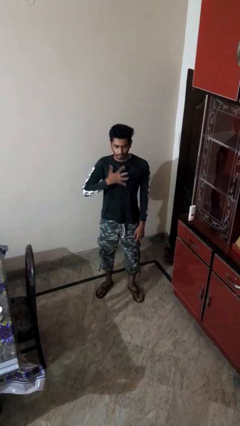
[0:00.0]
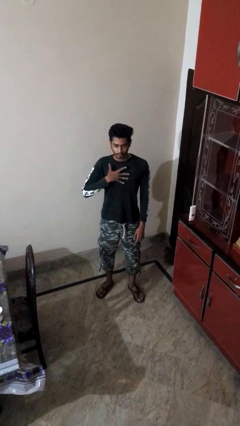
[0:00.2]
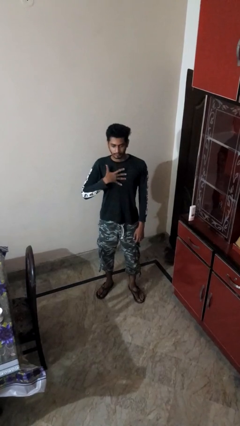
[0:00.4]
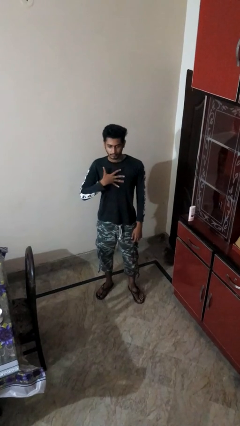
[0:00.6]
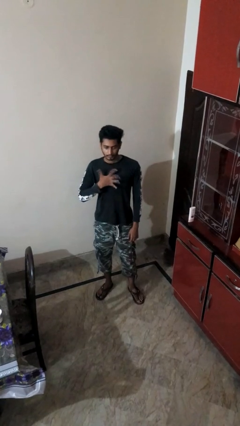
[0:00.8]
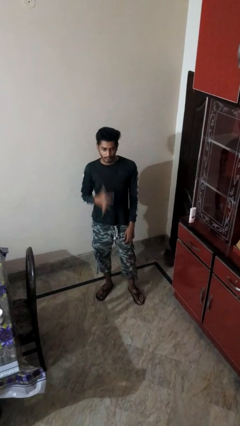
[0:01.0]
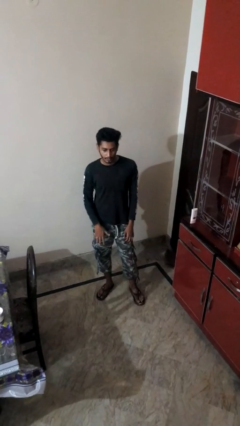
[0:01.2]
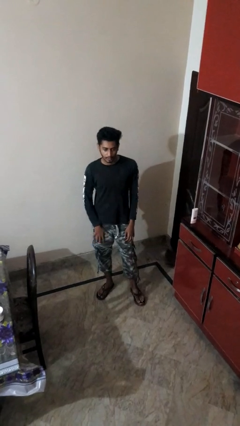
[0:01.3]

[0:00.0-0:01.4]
person drums on chest

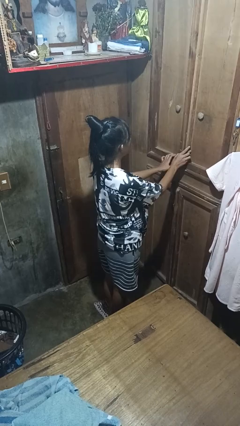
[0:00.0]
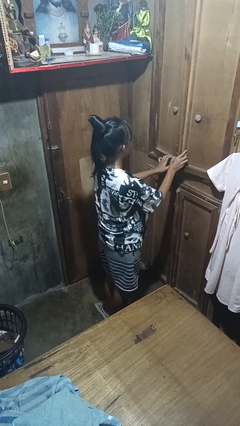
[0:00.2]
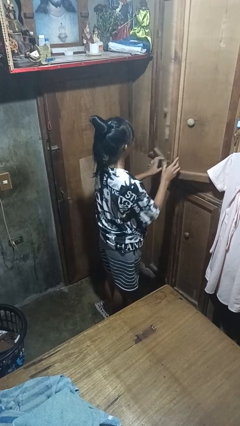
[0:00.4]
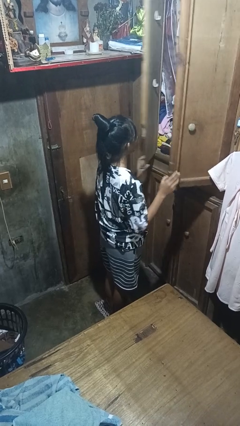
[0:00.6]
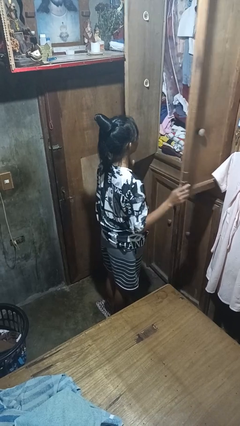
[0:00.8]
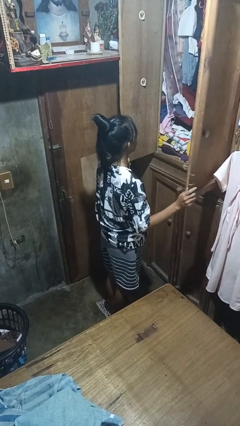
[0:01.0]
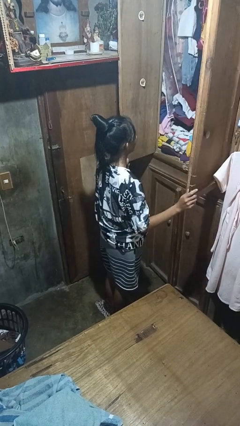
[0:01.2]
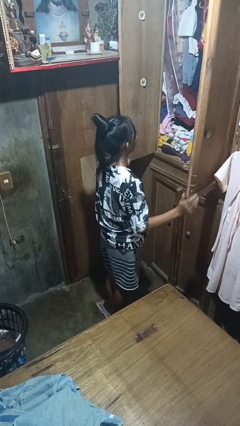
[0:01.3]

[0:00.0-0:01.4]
person opens closet door

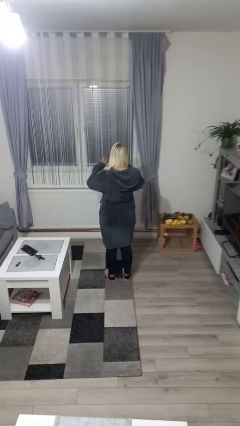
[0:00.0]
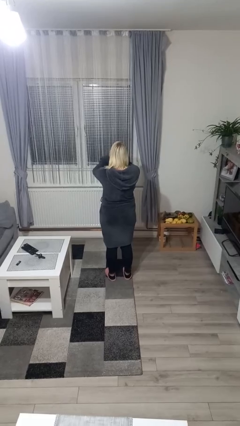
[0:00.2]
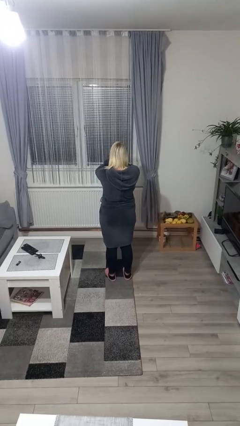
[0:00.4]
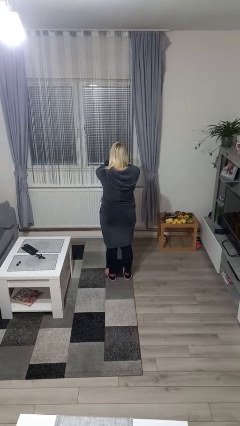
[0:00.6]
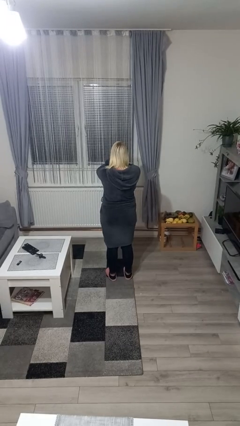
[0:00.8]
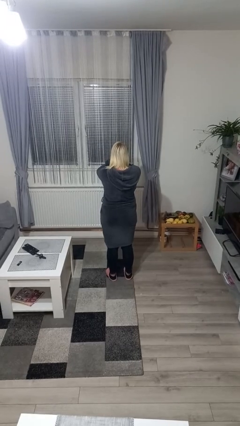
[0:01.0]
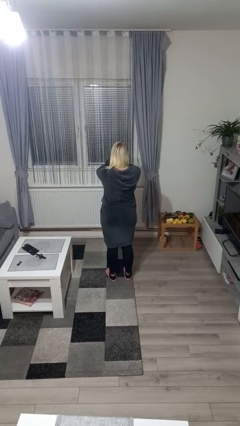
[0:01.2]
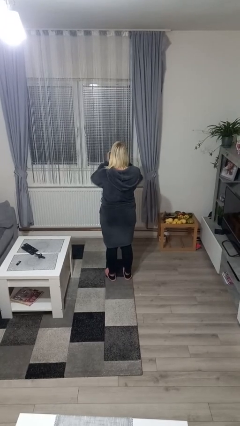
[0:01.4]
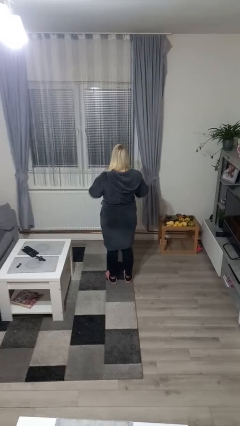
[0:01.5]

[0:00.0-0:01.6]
person covers face with hands

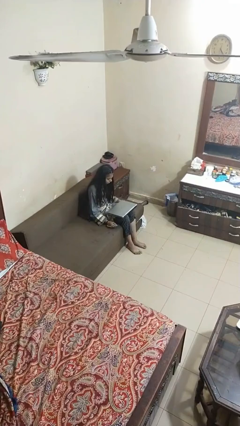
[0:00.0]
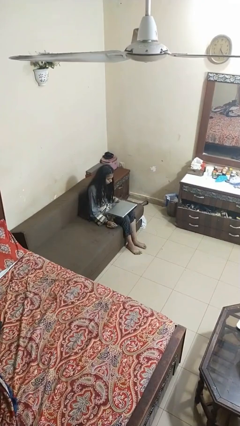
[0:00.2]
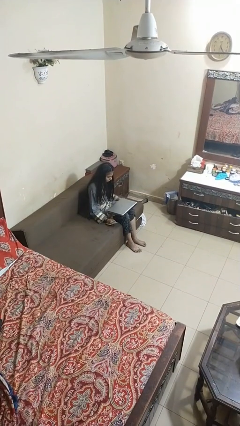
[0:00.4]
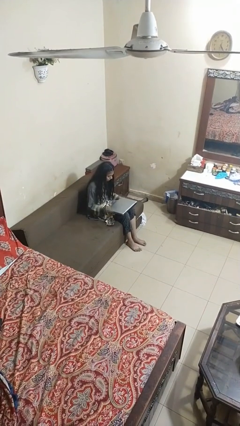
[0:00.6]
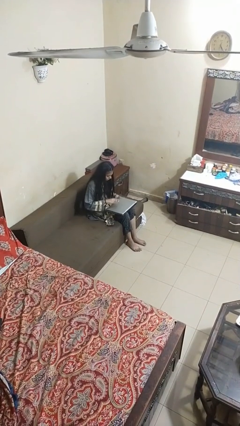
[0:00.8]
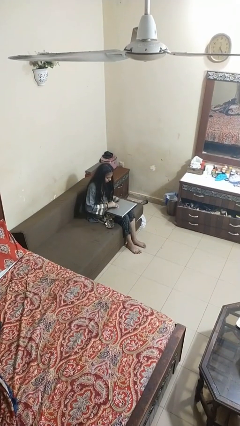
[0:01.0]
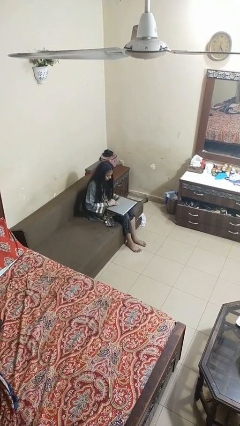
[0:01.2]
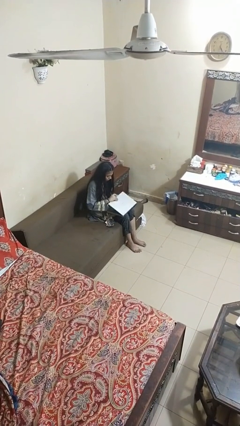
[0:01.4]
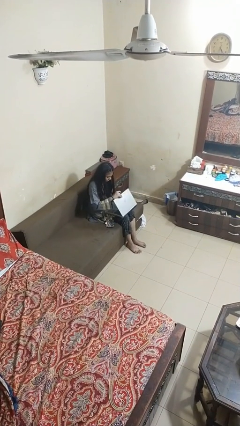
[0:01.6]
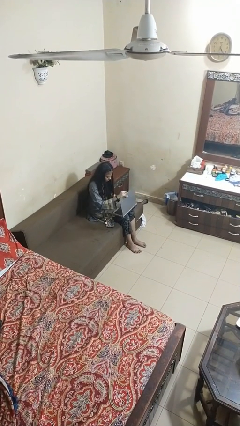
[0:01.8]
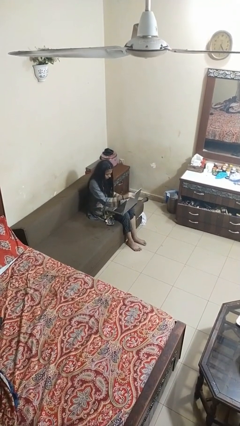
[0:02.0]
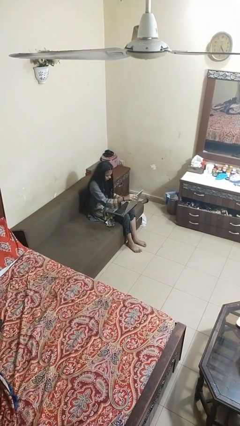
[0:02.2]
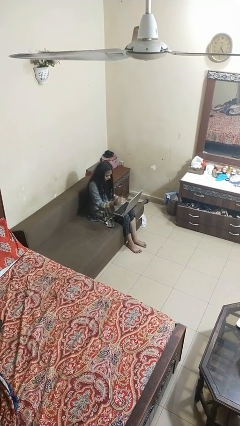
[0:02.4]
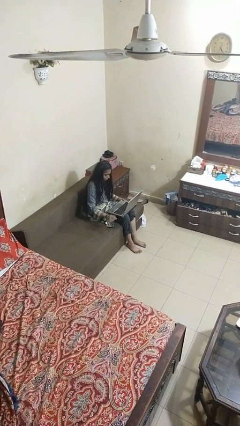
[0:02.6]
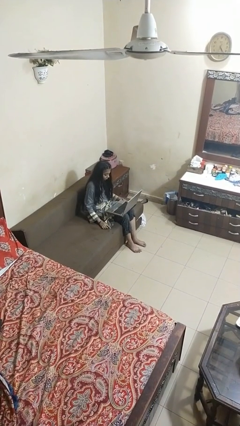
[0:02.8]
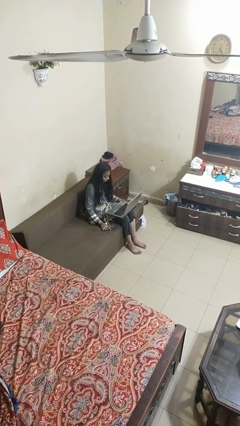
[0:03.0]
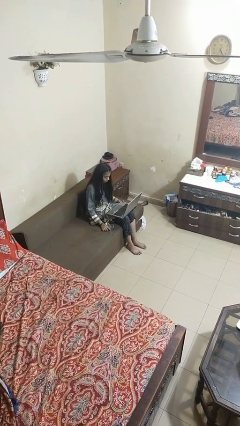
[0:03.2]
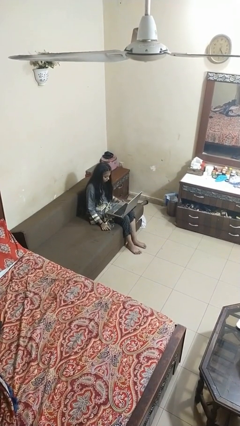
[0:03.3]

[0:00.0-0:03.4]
person opens laptop

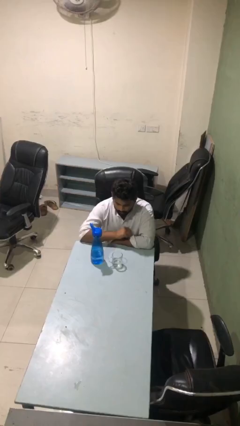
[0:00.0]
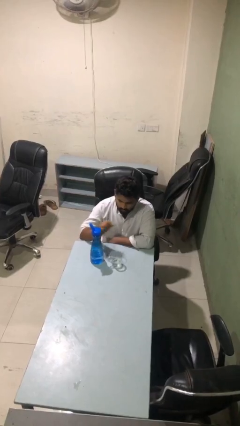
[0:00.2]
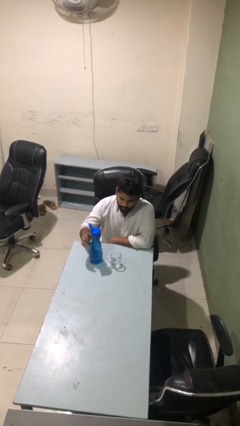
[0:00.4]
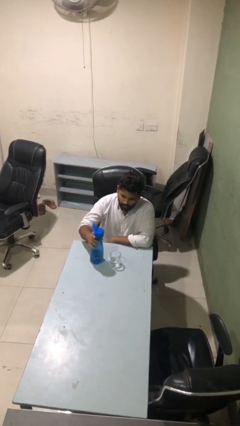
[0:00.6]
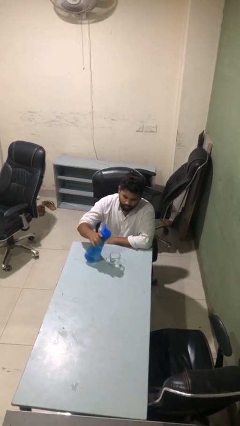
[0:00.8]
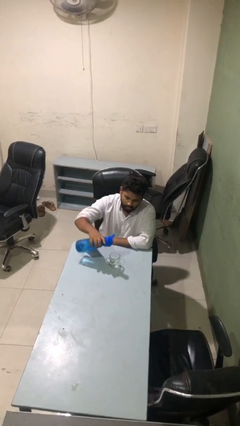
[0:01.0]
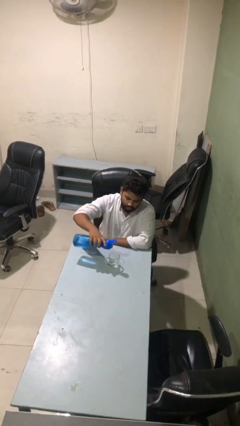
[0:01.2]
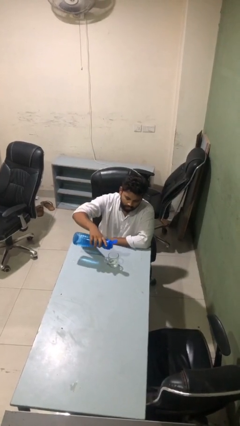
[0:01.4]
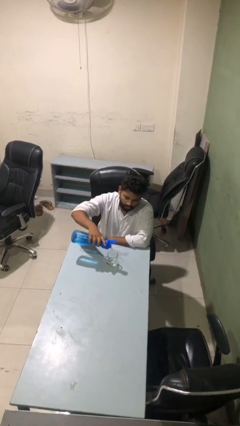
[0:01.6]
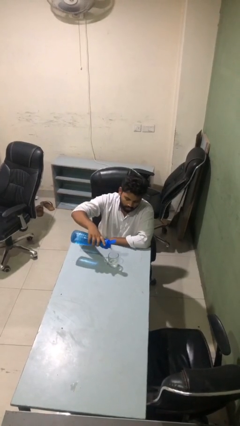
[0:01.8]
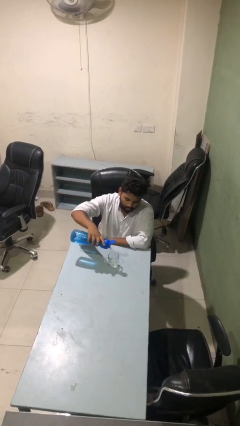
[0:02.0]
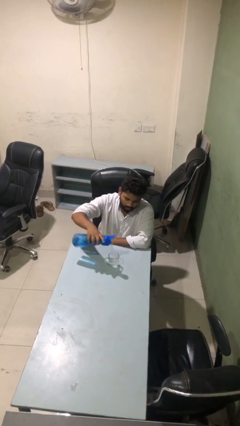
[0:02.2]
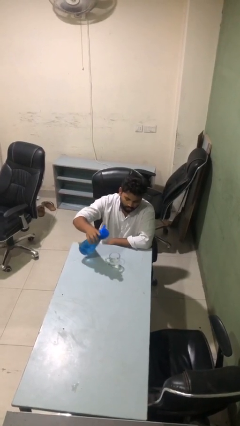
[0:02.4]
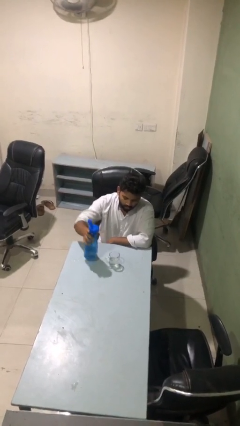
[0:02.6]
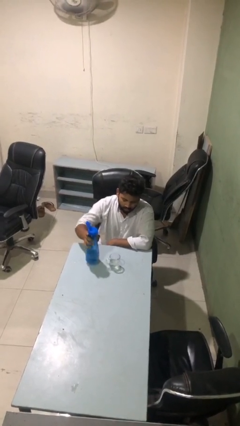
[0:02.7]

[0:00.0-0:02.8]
person pours liquid into cup

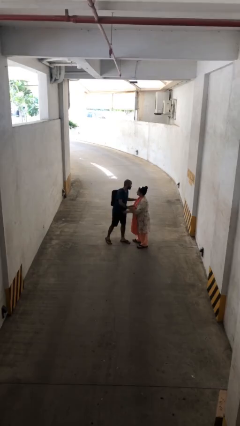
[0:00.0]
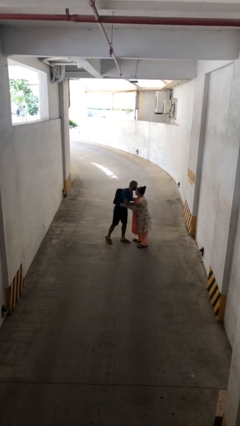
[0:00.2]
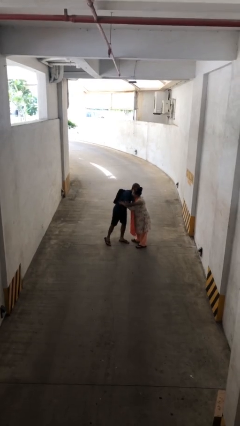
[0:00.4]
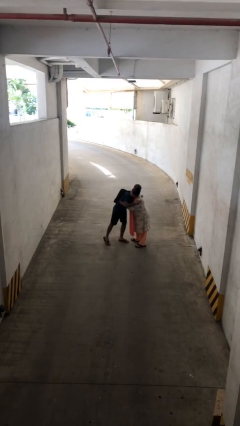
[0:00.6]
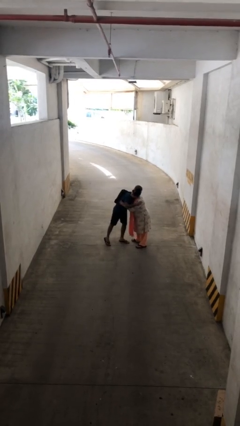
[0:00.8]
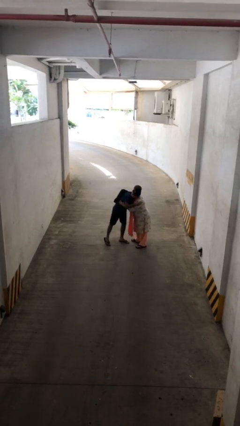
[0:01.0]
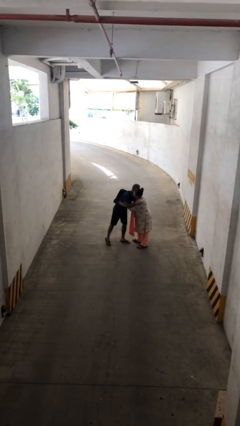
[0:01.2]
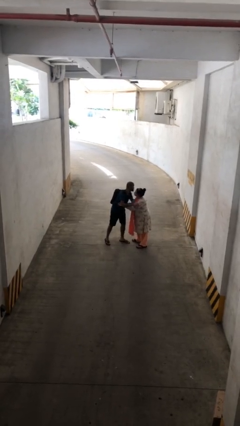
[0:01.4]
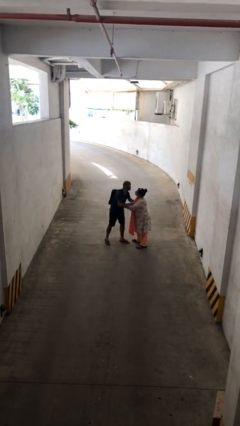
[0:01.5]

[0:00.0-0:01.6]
person embraces person

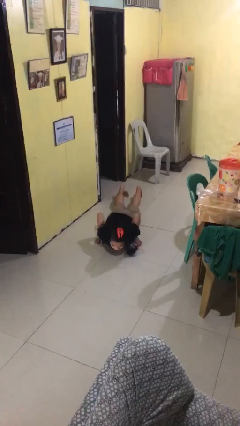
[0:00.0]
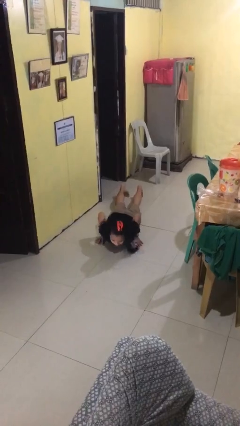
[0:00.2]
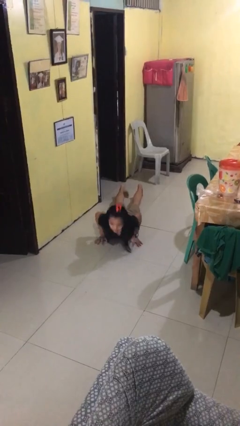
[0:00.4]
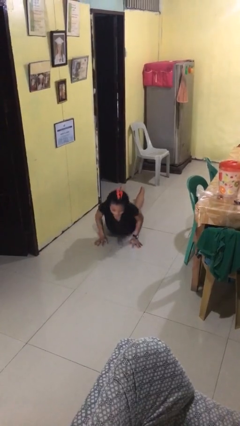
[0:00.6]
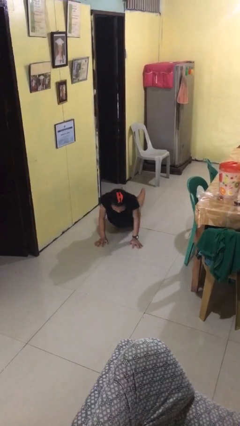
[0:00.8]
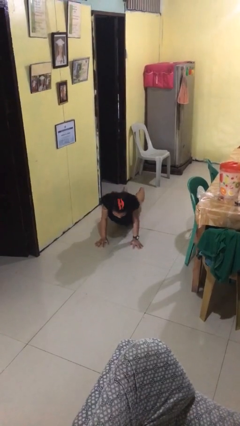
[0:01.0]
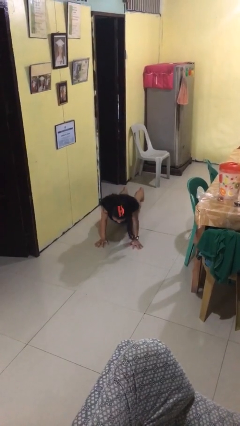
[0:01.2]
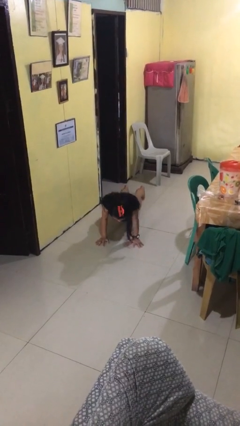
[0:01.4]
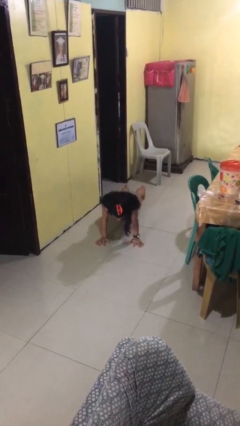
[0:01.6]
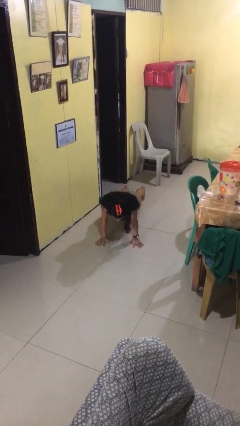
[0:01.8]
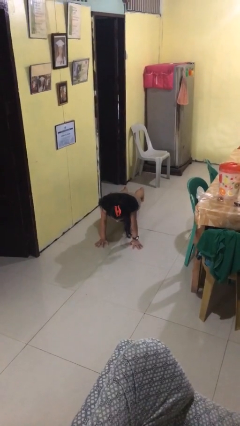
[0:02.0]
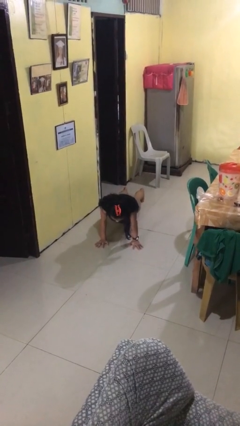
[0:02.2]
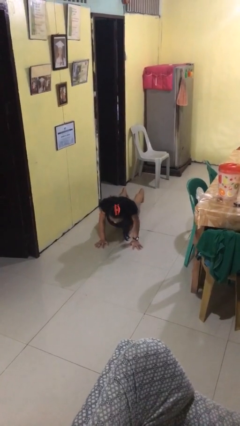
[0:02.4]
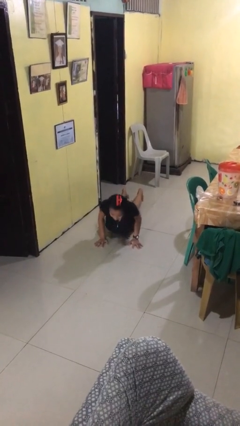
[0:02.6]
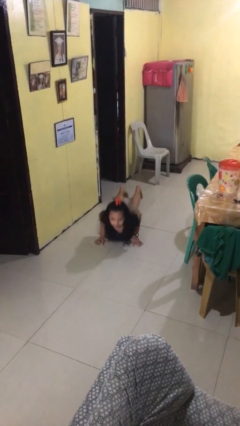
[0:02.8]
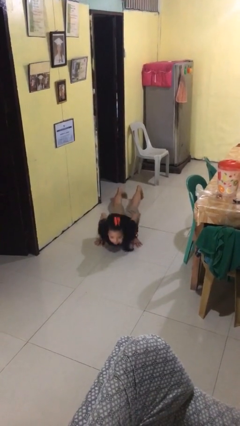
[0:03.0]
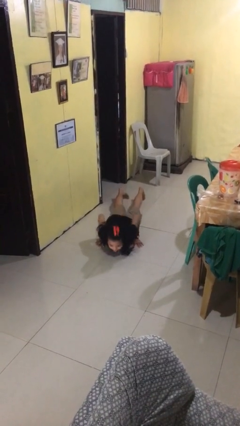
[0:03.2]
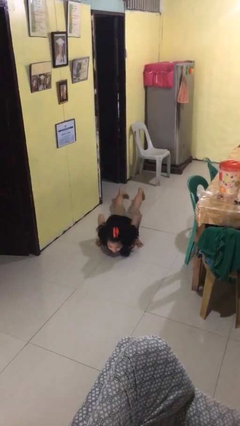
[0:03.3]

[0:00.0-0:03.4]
person exercises with pushup

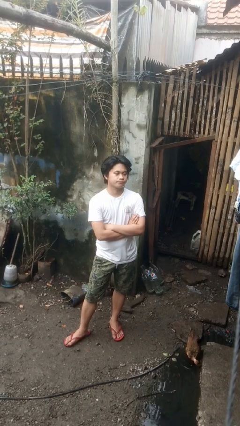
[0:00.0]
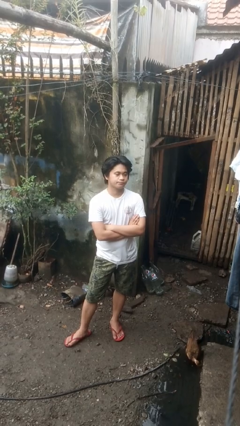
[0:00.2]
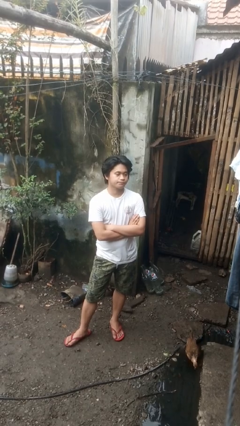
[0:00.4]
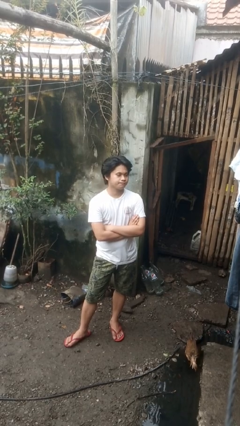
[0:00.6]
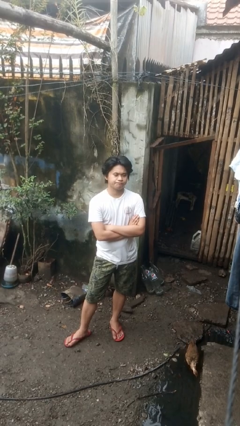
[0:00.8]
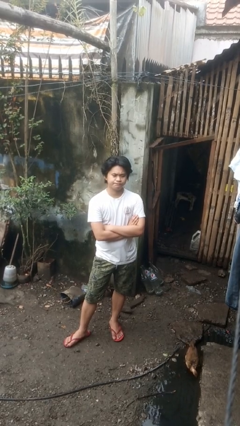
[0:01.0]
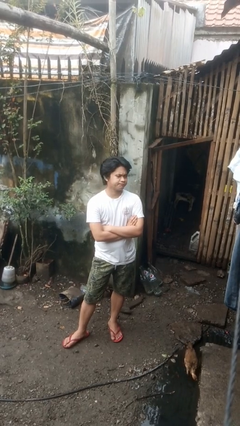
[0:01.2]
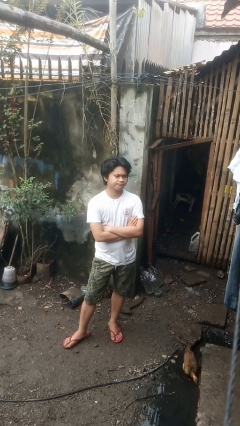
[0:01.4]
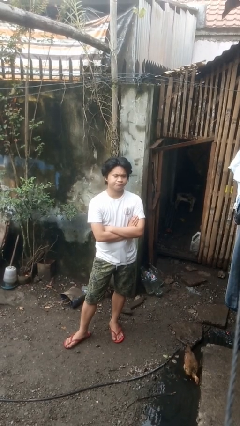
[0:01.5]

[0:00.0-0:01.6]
person shakes head
